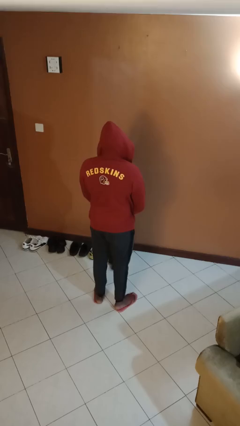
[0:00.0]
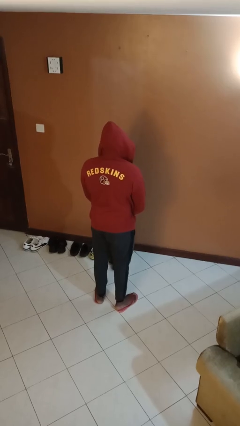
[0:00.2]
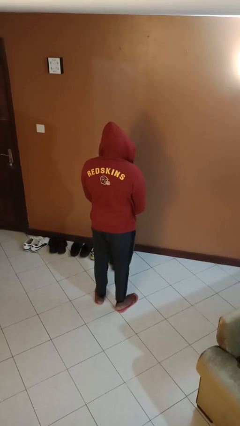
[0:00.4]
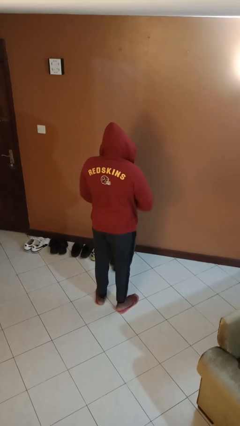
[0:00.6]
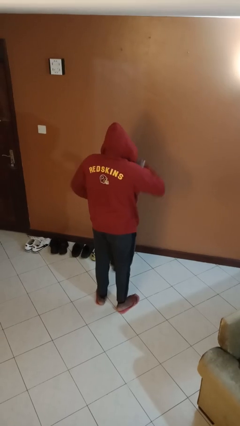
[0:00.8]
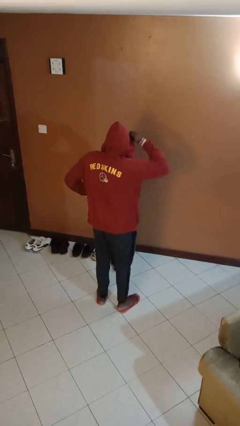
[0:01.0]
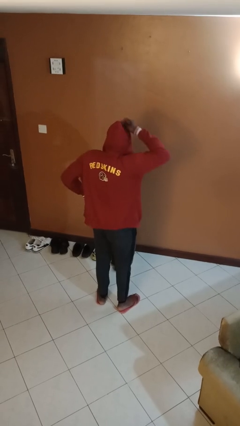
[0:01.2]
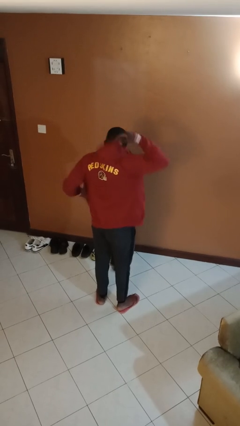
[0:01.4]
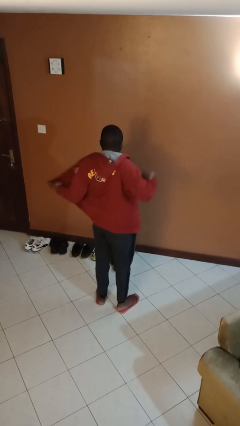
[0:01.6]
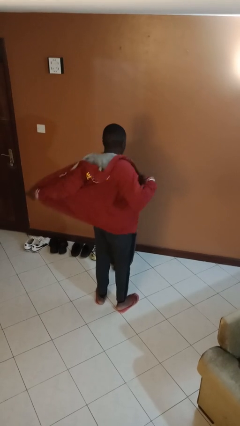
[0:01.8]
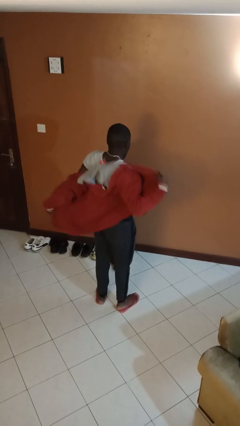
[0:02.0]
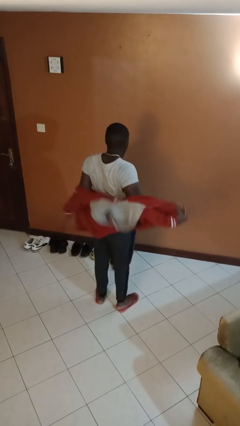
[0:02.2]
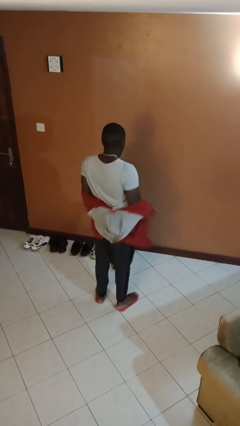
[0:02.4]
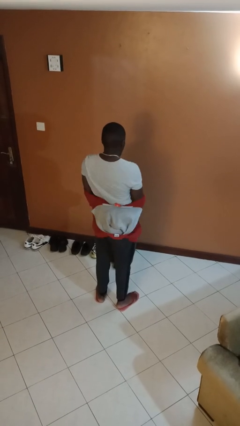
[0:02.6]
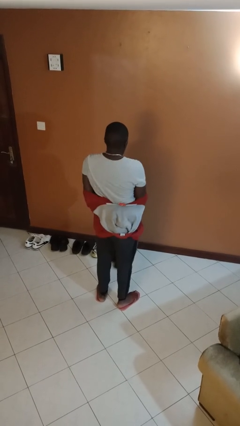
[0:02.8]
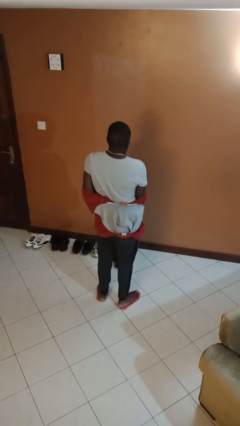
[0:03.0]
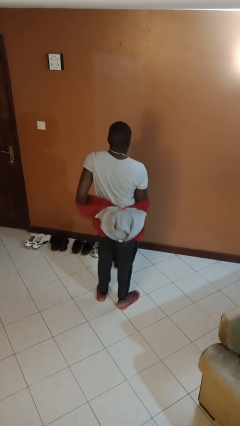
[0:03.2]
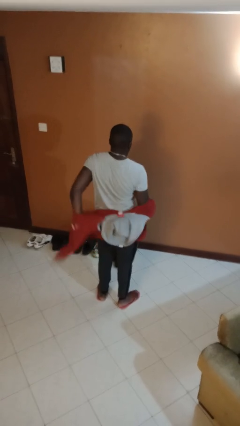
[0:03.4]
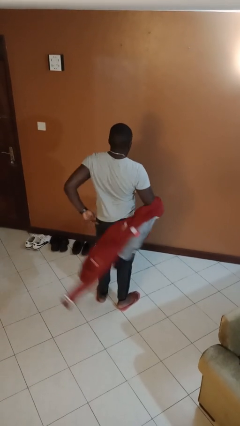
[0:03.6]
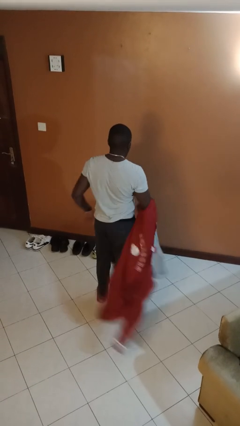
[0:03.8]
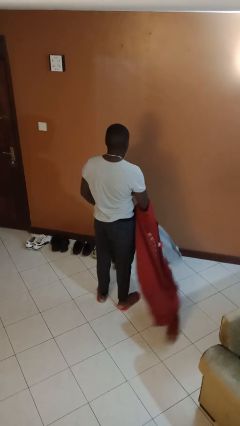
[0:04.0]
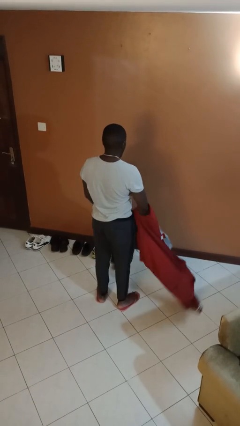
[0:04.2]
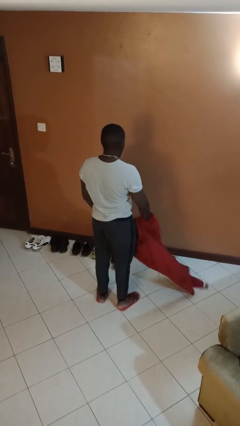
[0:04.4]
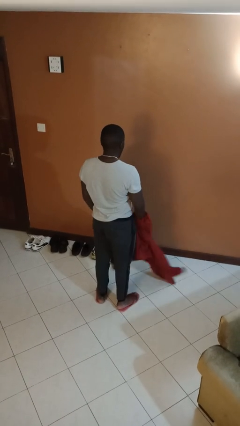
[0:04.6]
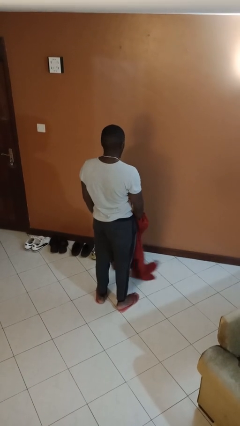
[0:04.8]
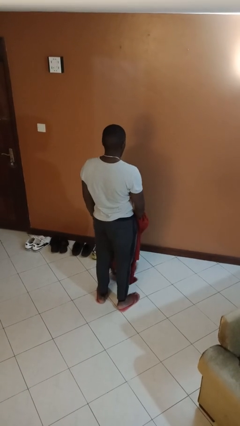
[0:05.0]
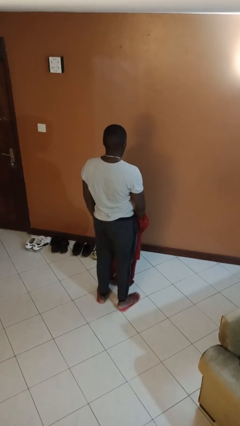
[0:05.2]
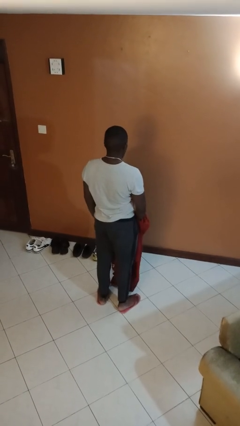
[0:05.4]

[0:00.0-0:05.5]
person takes off hoodie

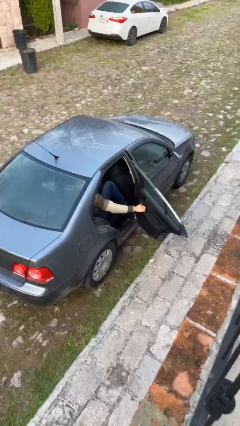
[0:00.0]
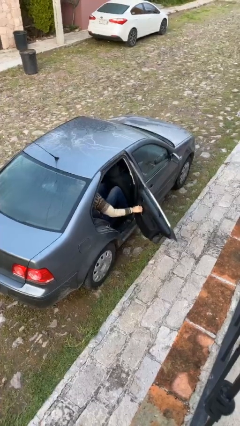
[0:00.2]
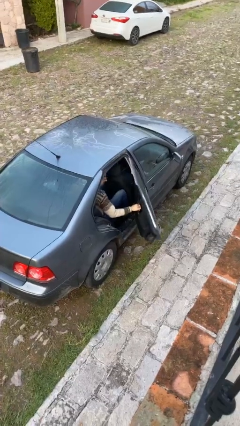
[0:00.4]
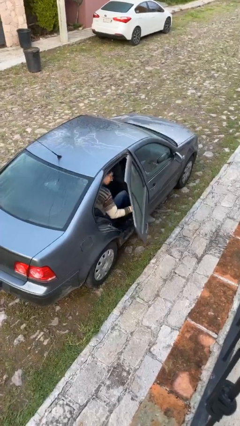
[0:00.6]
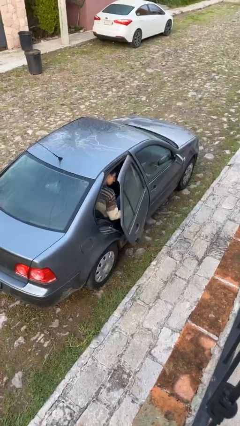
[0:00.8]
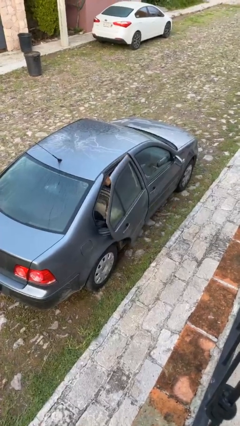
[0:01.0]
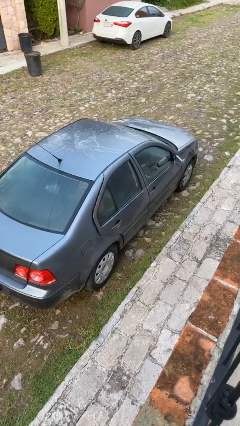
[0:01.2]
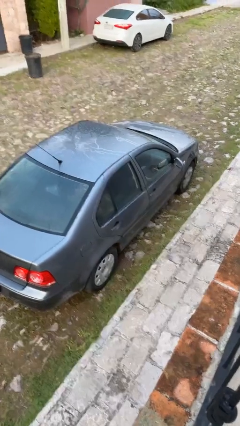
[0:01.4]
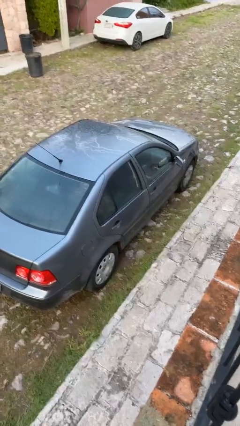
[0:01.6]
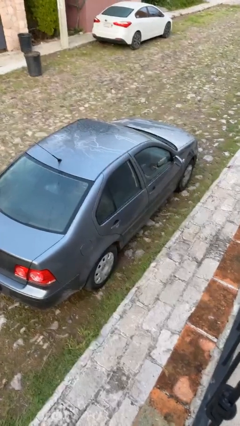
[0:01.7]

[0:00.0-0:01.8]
person closes car door

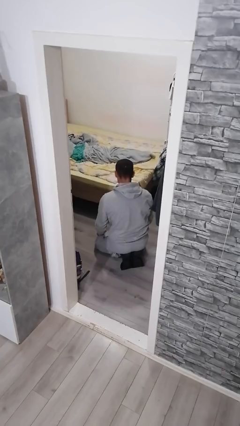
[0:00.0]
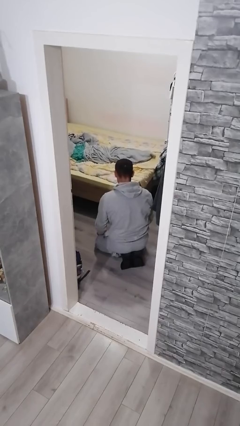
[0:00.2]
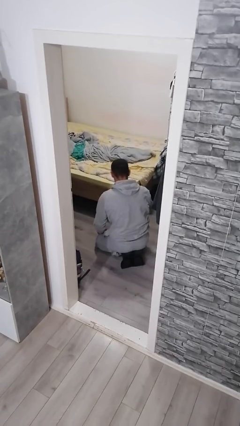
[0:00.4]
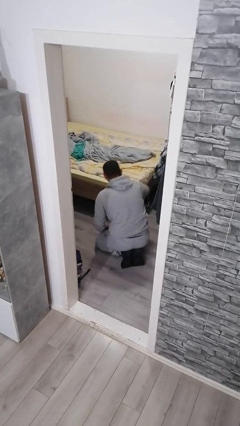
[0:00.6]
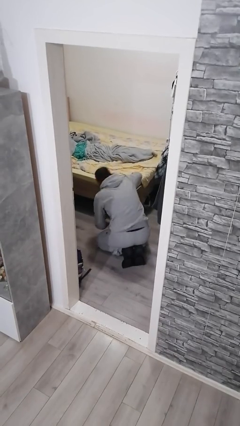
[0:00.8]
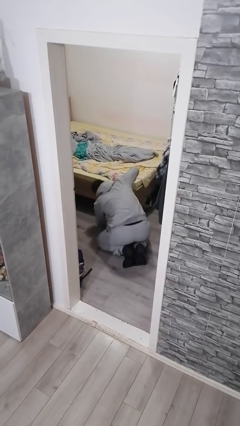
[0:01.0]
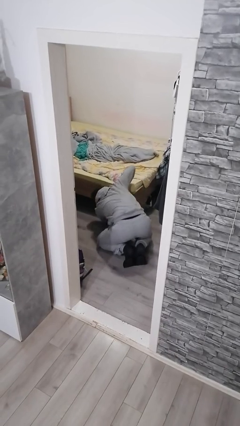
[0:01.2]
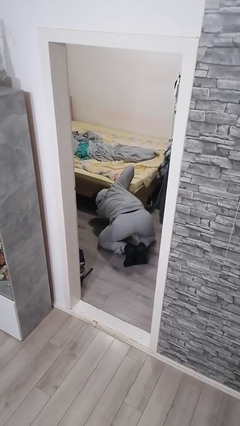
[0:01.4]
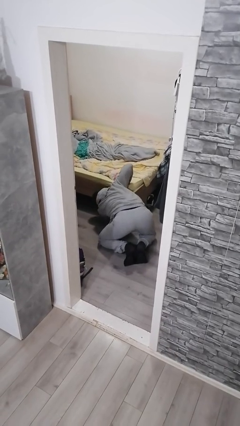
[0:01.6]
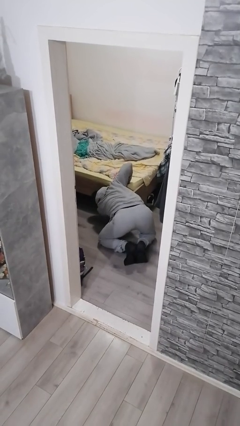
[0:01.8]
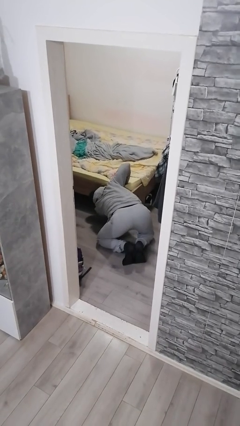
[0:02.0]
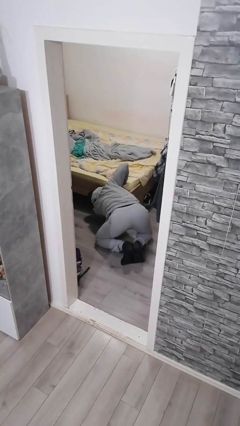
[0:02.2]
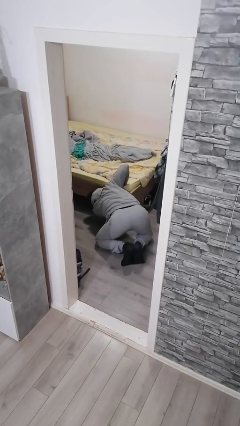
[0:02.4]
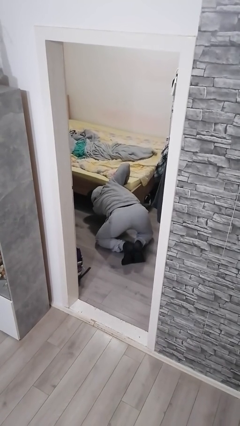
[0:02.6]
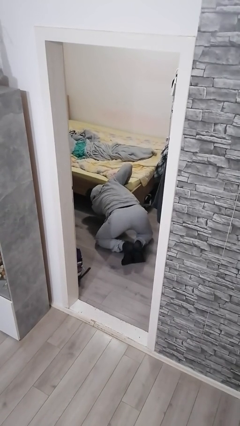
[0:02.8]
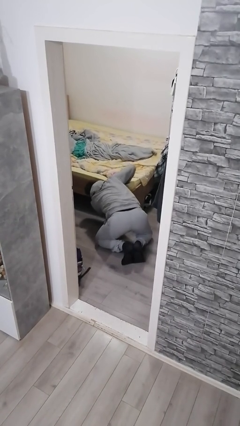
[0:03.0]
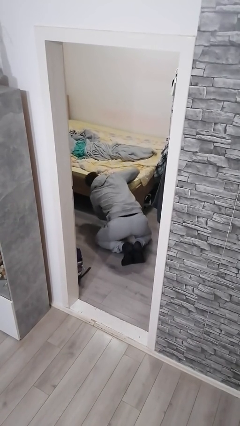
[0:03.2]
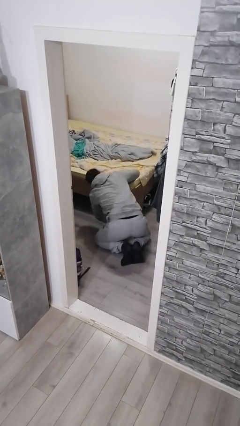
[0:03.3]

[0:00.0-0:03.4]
person searches under bed

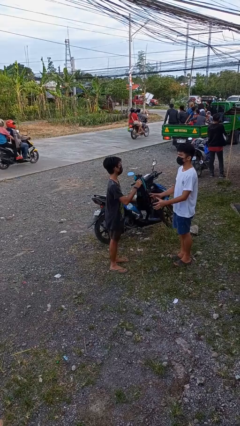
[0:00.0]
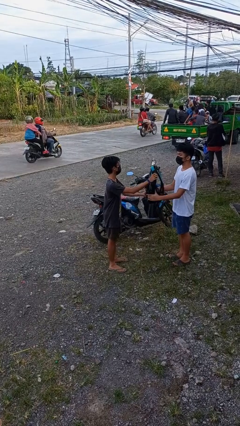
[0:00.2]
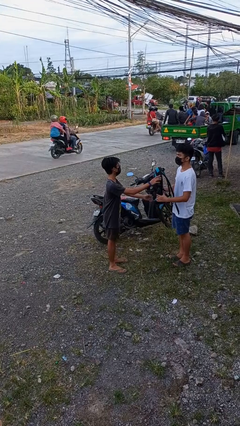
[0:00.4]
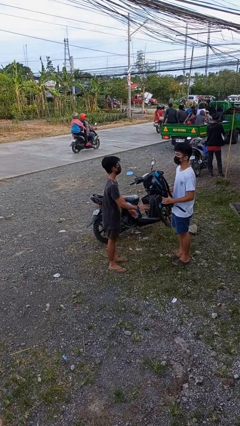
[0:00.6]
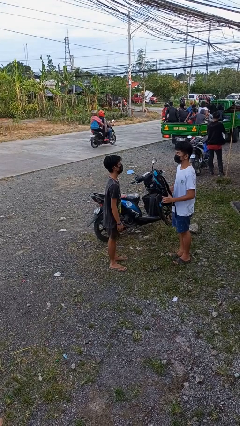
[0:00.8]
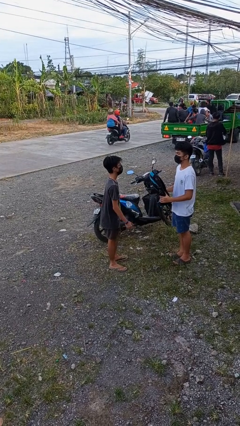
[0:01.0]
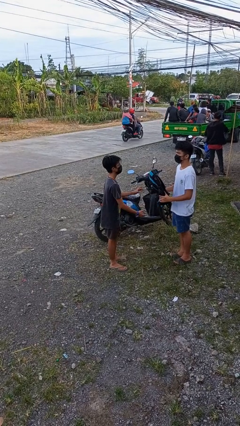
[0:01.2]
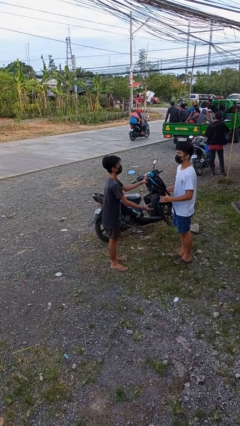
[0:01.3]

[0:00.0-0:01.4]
person transfers object to person

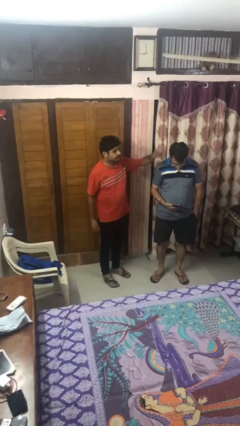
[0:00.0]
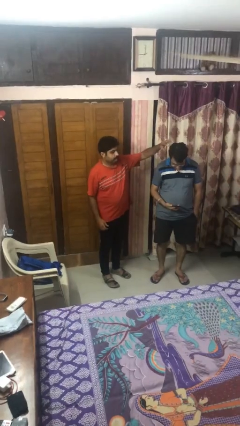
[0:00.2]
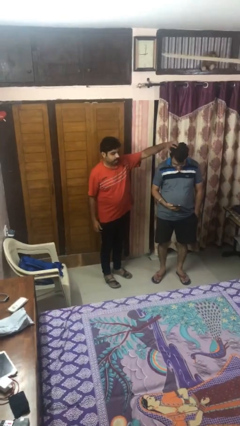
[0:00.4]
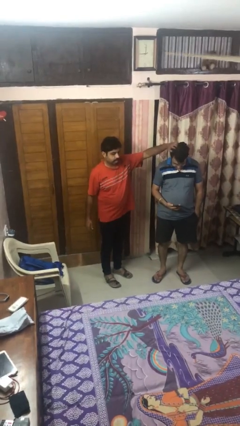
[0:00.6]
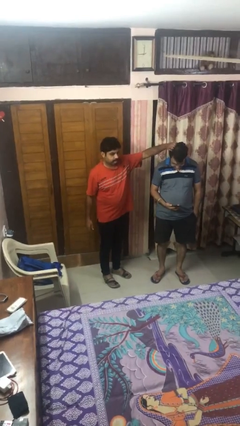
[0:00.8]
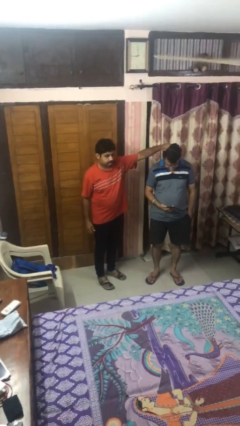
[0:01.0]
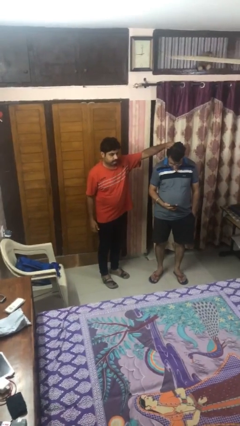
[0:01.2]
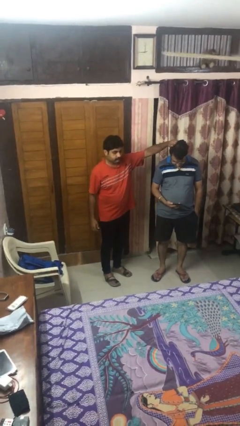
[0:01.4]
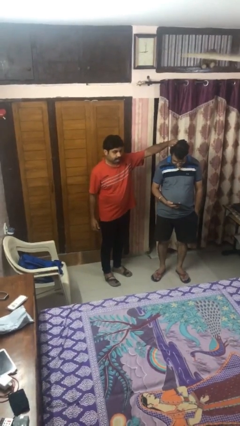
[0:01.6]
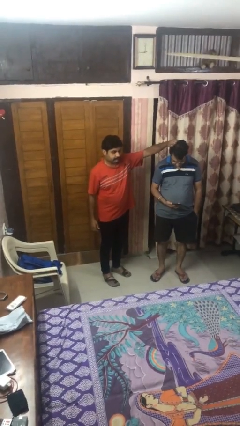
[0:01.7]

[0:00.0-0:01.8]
person grabs person by hair

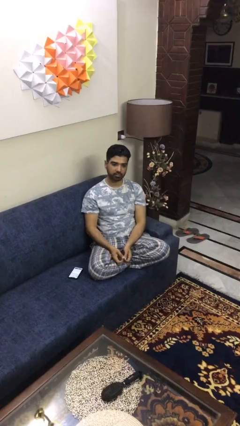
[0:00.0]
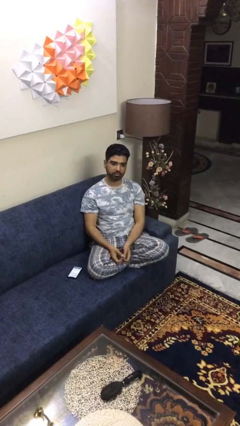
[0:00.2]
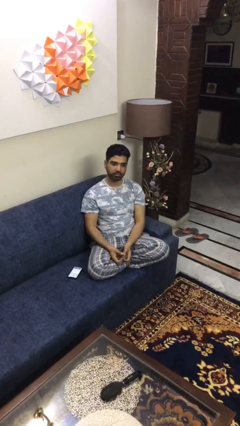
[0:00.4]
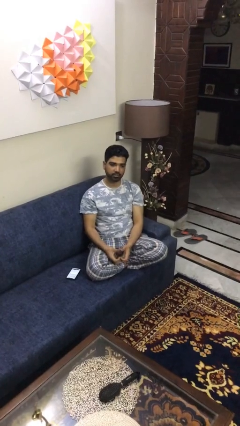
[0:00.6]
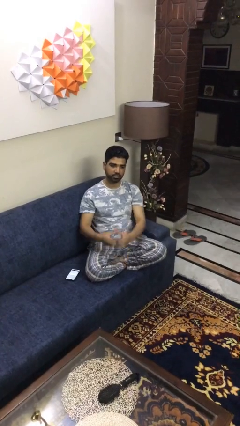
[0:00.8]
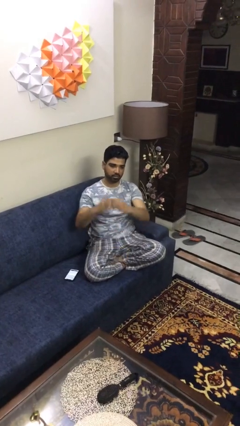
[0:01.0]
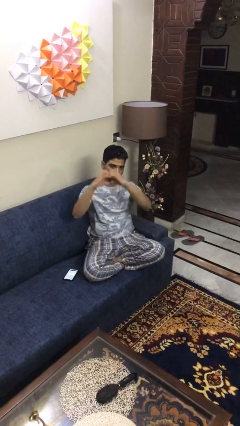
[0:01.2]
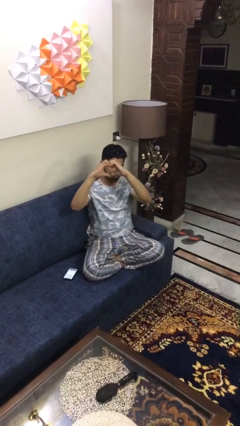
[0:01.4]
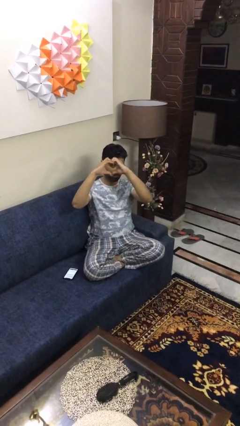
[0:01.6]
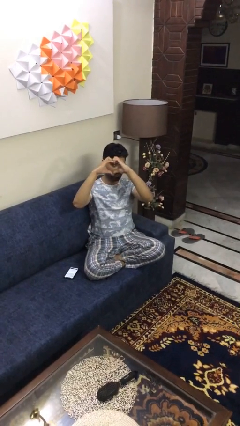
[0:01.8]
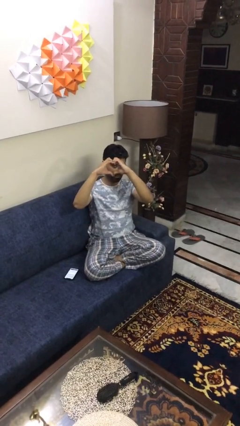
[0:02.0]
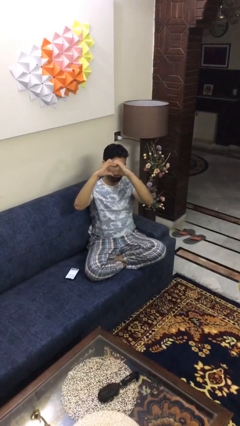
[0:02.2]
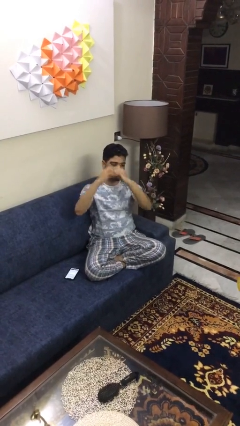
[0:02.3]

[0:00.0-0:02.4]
person gestures heart

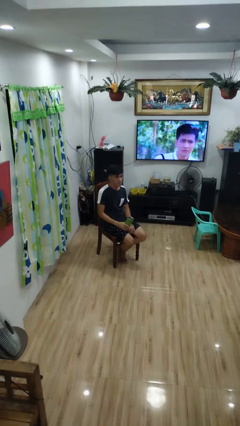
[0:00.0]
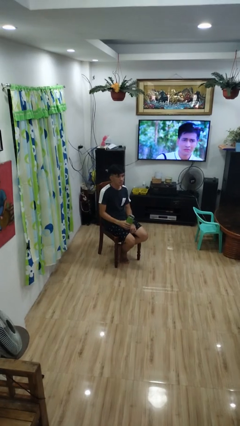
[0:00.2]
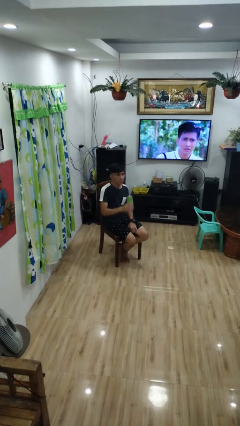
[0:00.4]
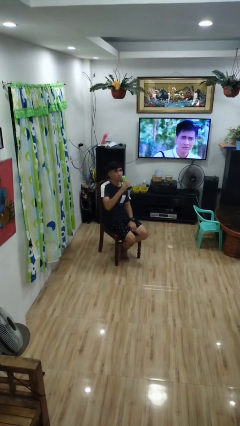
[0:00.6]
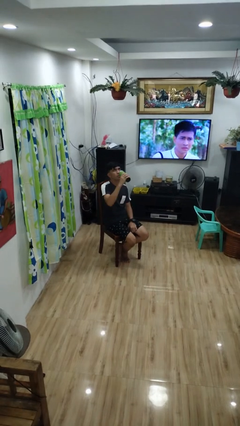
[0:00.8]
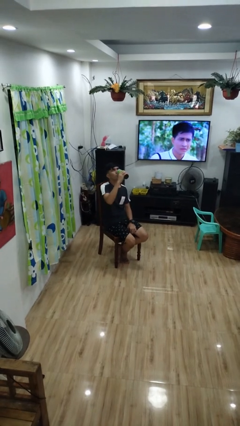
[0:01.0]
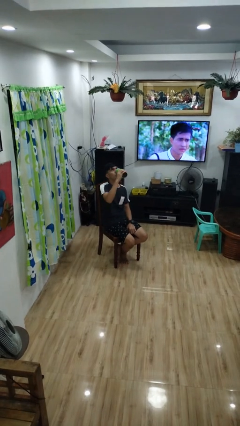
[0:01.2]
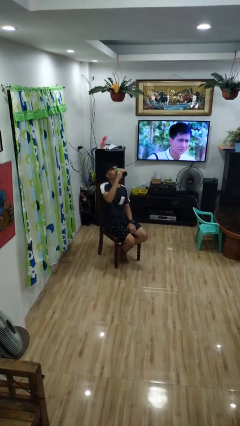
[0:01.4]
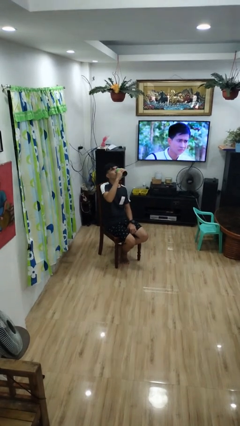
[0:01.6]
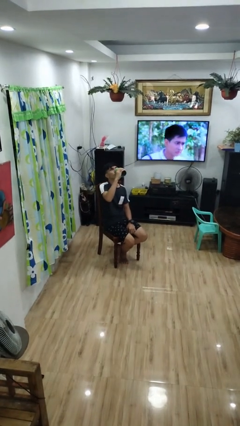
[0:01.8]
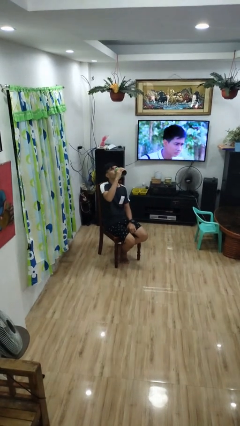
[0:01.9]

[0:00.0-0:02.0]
person drinks from bottle
